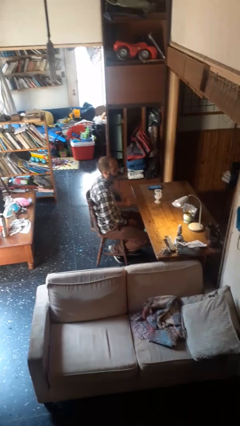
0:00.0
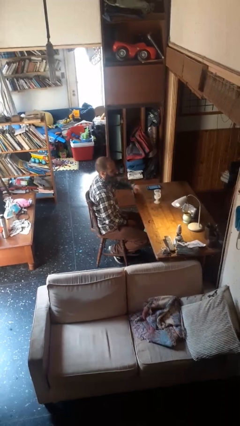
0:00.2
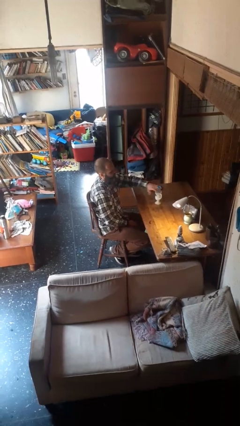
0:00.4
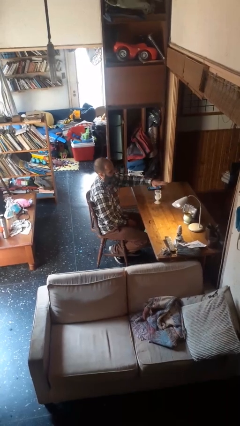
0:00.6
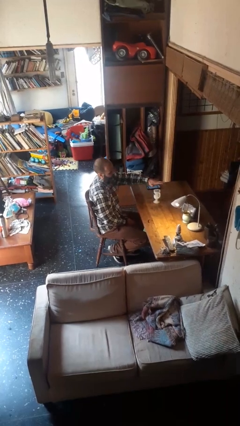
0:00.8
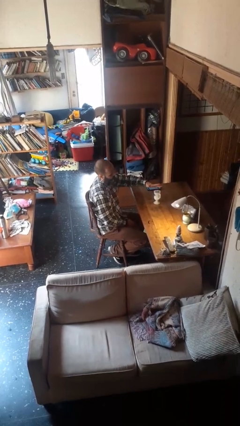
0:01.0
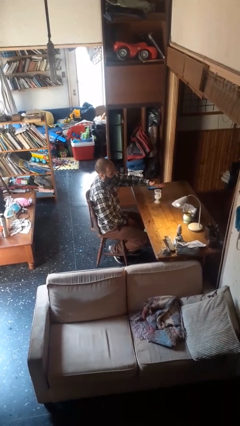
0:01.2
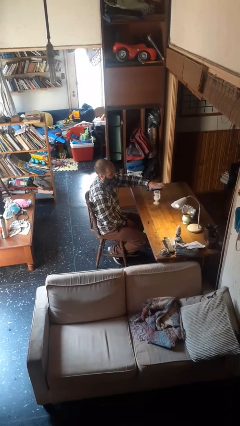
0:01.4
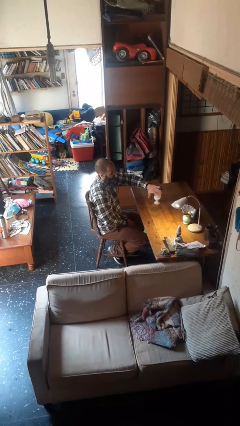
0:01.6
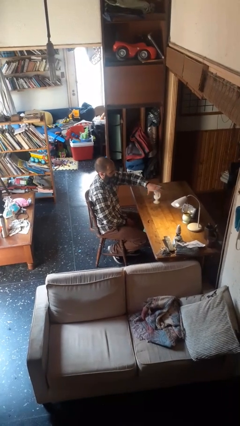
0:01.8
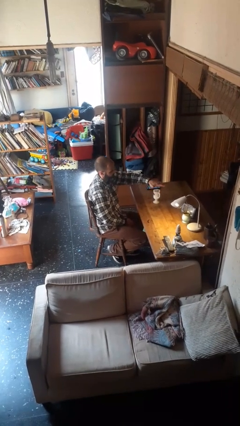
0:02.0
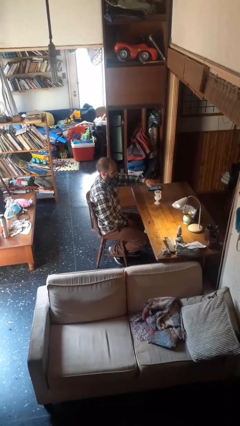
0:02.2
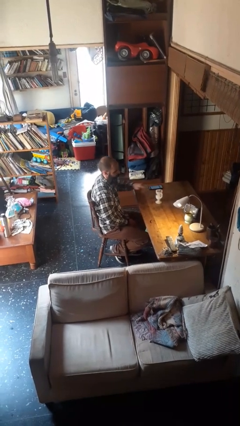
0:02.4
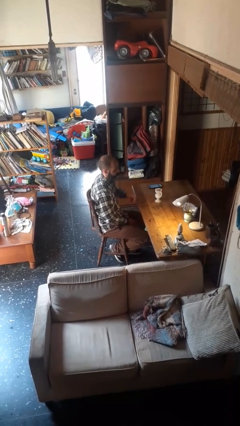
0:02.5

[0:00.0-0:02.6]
person waves hand over object

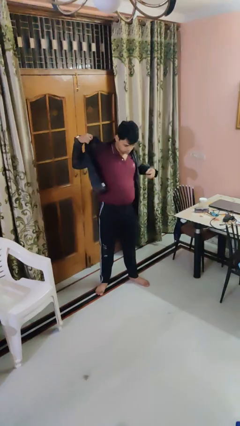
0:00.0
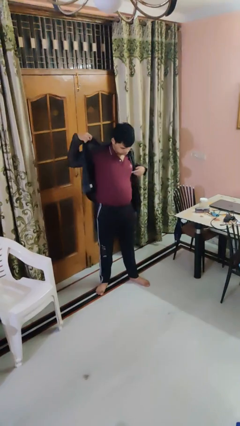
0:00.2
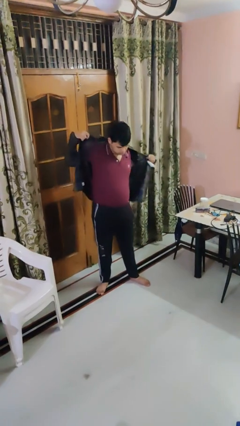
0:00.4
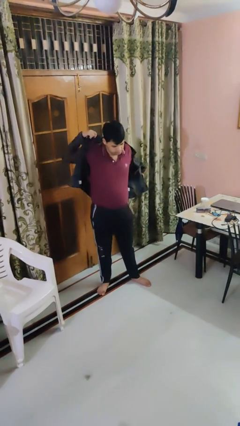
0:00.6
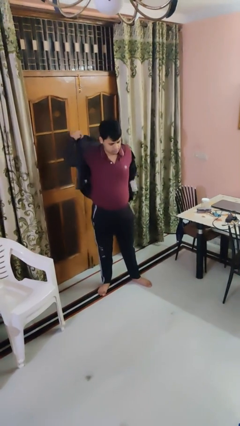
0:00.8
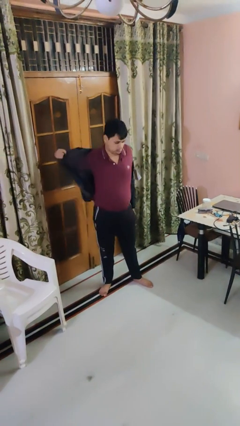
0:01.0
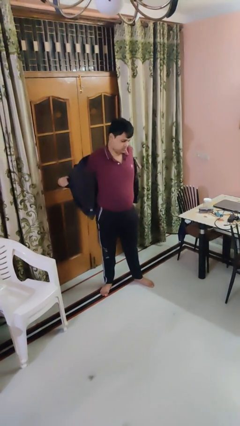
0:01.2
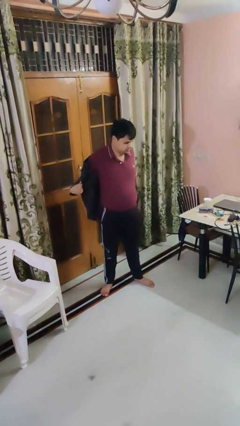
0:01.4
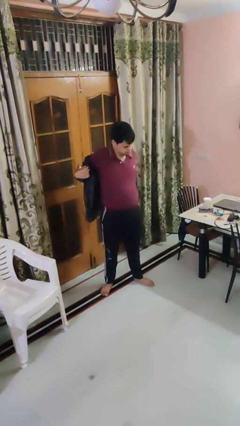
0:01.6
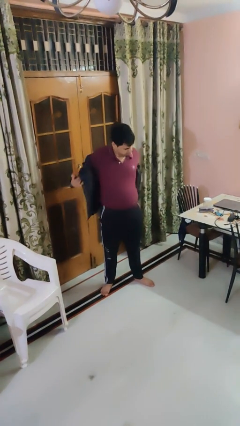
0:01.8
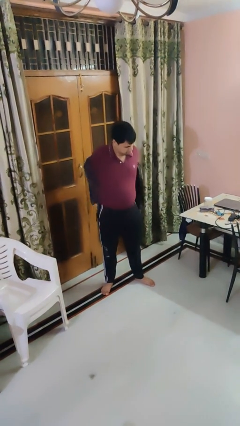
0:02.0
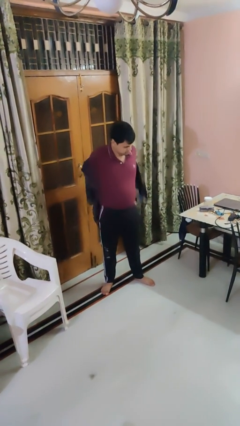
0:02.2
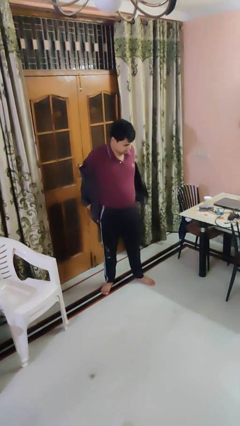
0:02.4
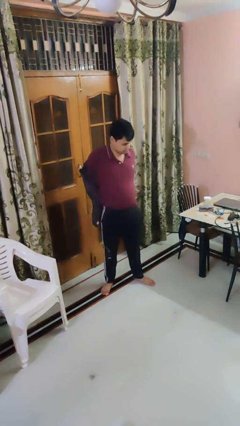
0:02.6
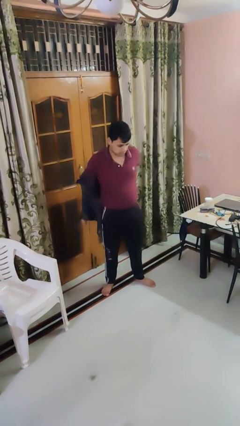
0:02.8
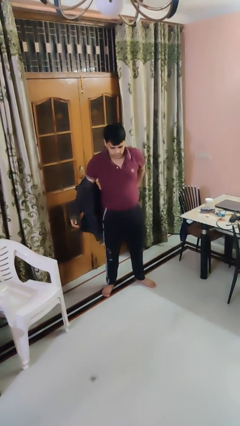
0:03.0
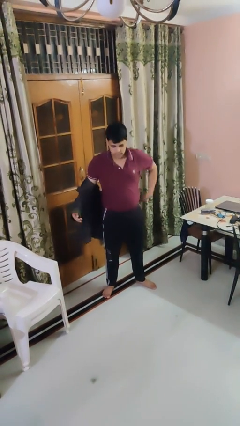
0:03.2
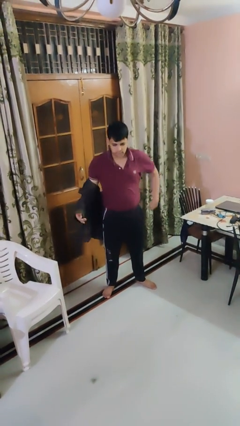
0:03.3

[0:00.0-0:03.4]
person takes off shirt

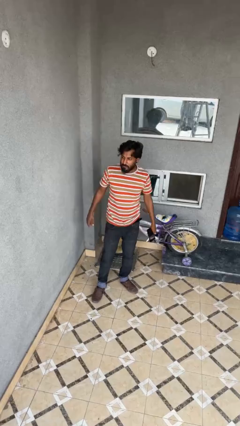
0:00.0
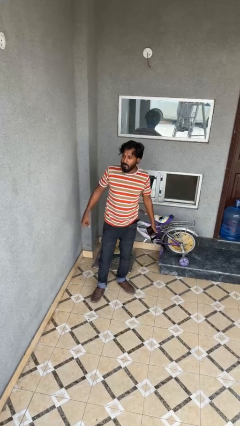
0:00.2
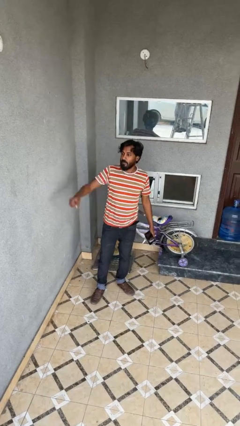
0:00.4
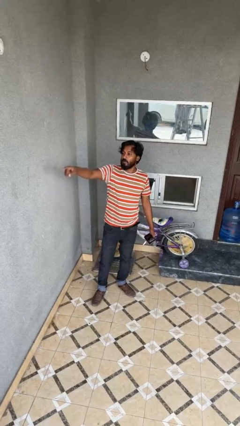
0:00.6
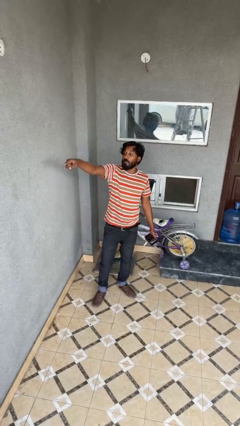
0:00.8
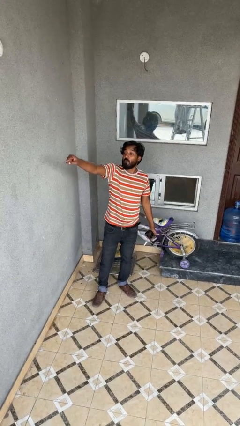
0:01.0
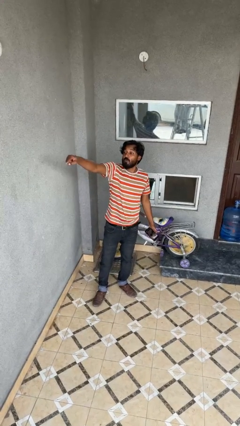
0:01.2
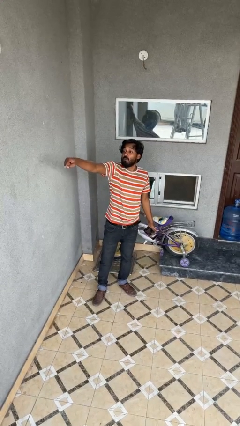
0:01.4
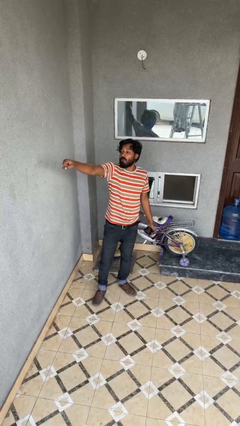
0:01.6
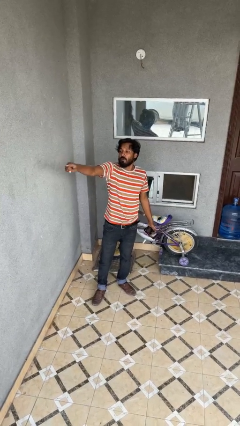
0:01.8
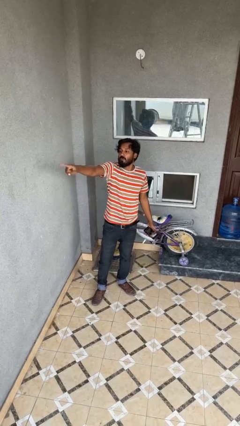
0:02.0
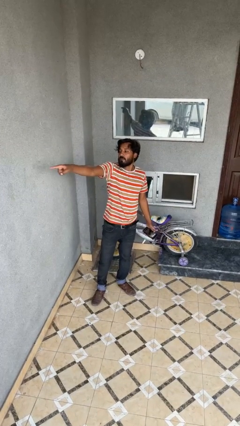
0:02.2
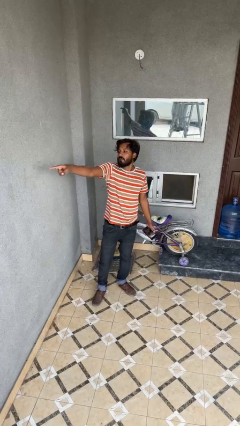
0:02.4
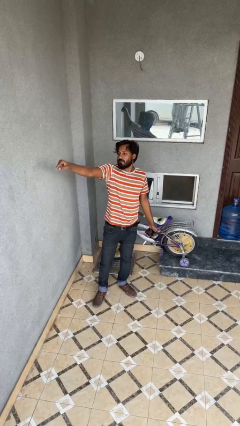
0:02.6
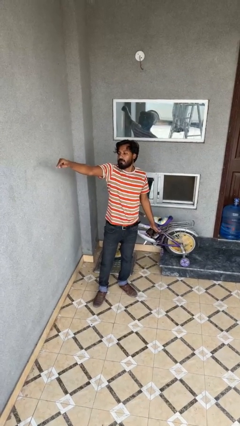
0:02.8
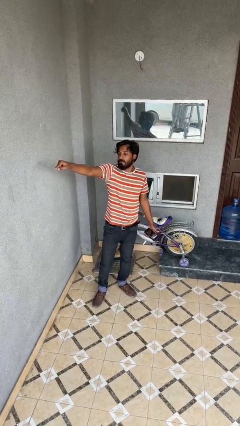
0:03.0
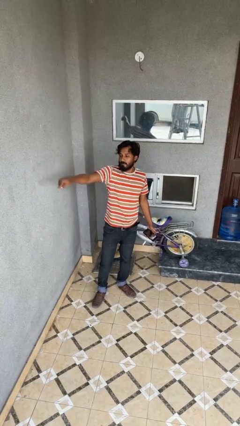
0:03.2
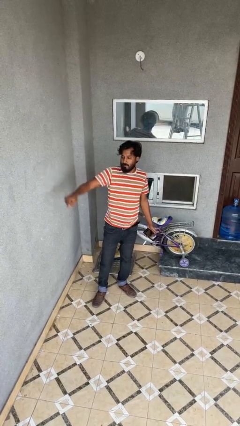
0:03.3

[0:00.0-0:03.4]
person points at person

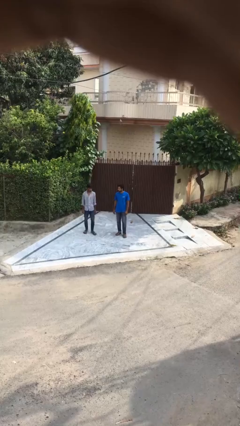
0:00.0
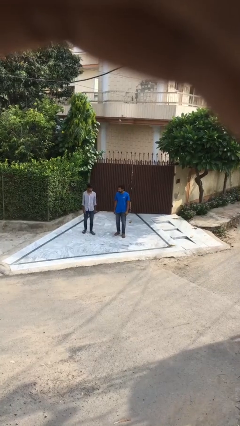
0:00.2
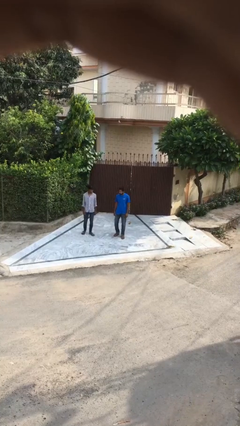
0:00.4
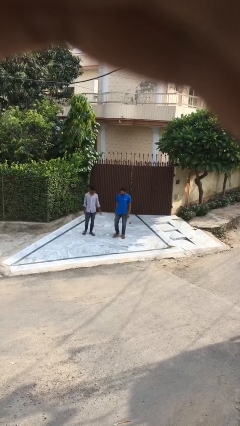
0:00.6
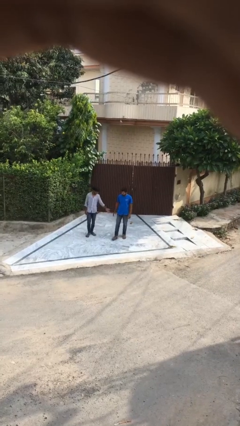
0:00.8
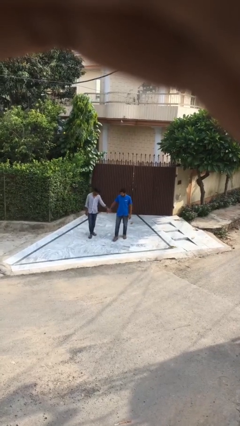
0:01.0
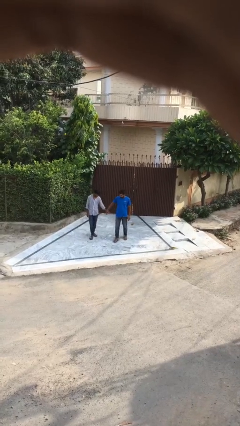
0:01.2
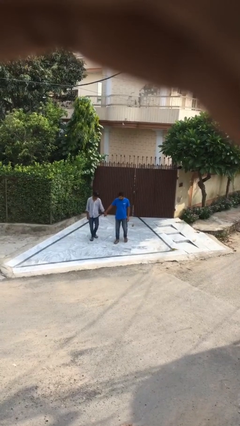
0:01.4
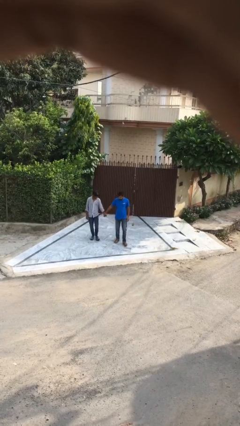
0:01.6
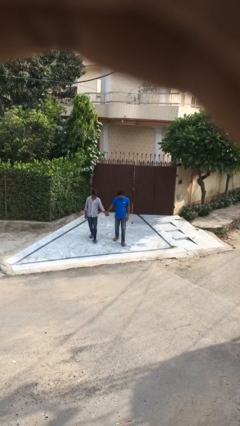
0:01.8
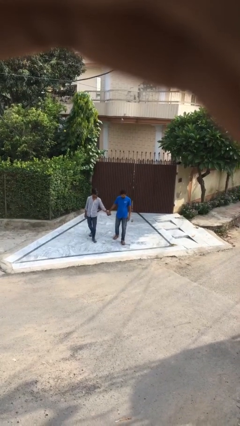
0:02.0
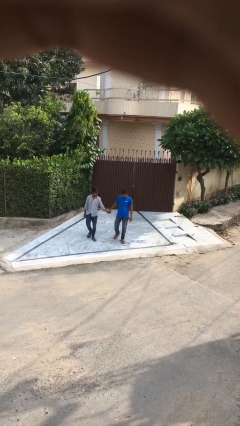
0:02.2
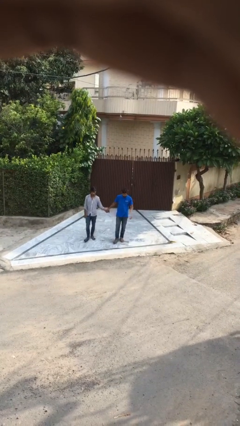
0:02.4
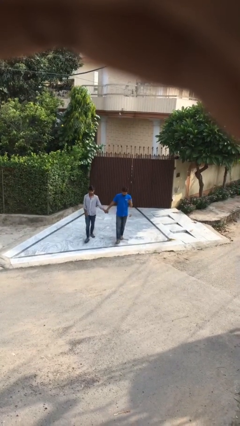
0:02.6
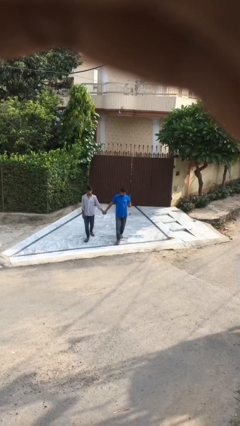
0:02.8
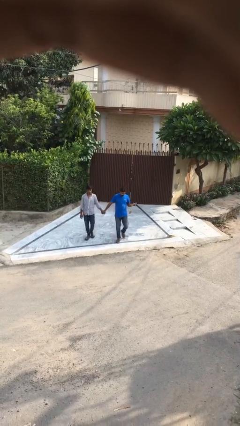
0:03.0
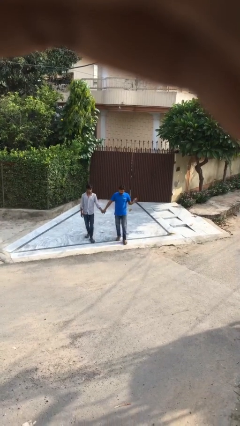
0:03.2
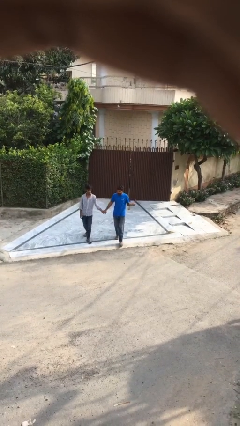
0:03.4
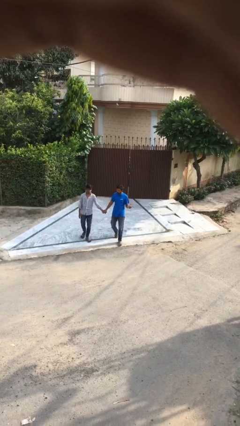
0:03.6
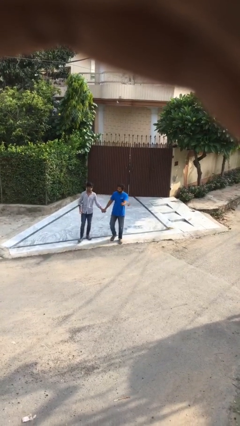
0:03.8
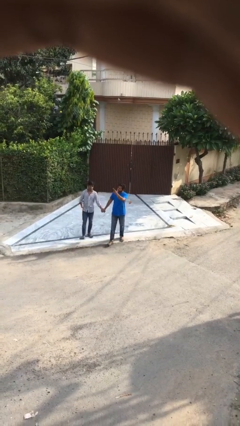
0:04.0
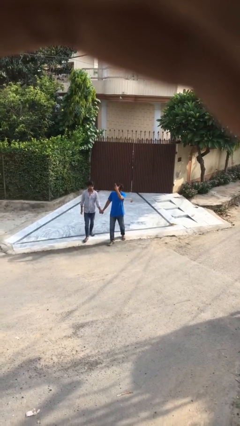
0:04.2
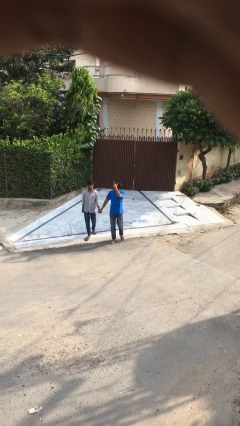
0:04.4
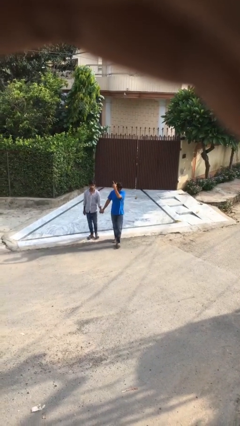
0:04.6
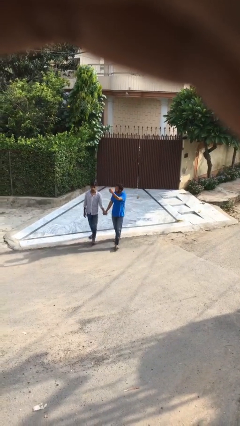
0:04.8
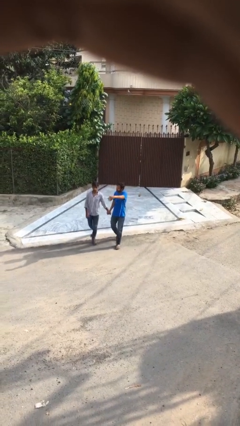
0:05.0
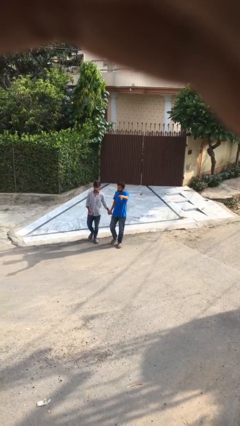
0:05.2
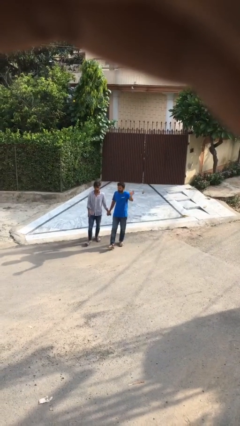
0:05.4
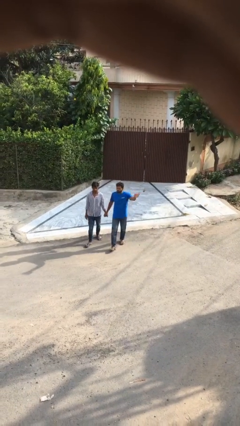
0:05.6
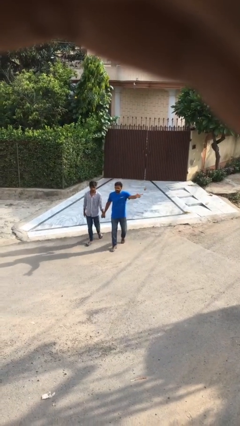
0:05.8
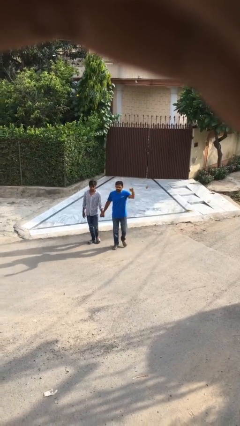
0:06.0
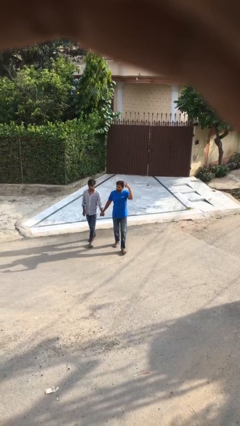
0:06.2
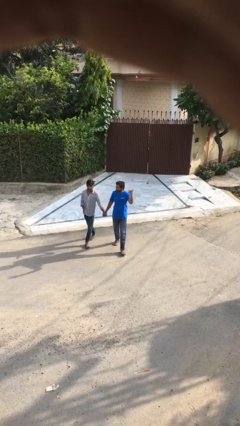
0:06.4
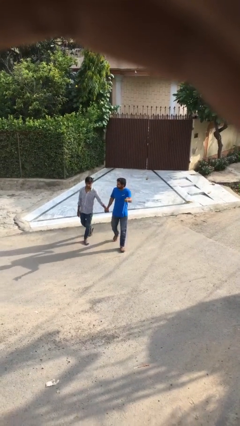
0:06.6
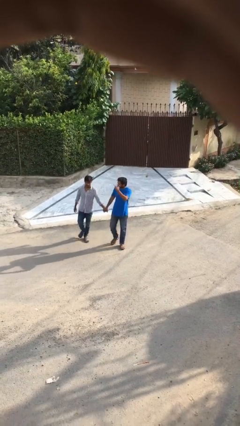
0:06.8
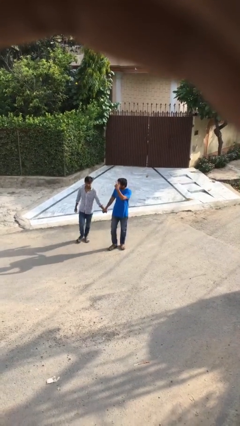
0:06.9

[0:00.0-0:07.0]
person holds hand

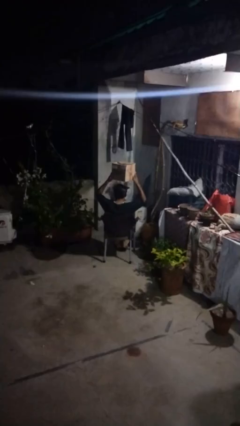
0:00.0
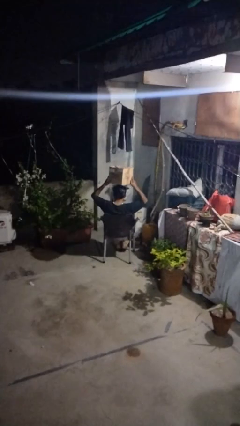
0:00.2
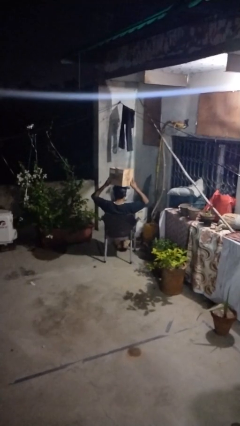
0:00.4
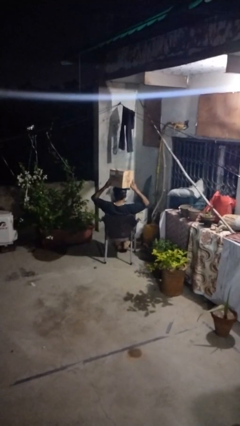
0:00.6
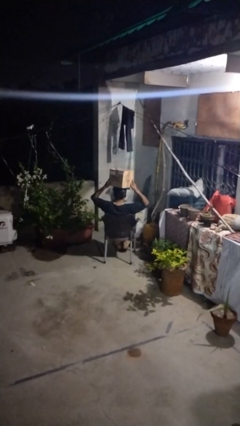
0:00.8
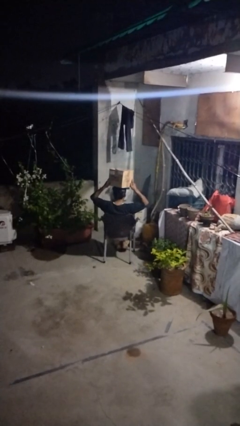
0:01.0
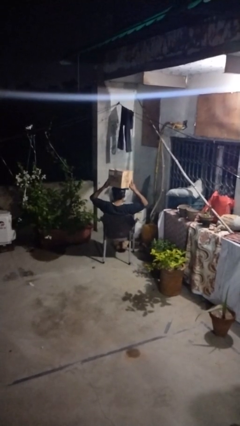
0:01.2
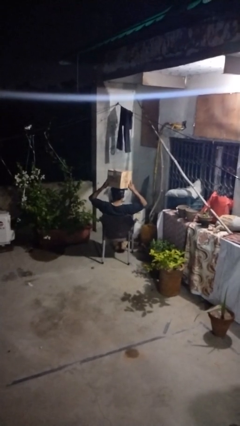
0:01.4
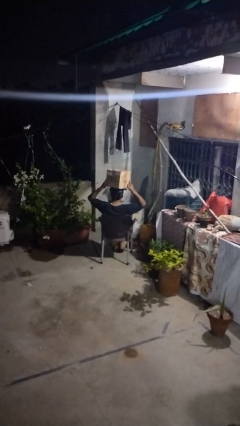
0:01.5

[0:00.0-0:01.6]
person holds object above head
